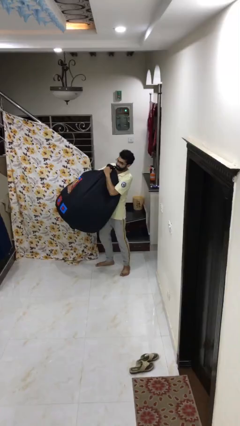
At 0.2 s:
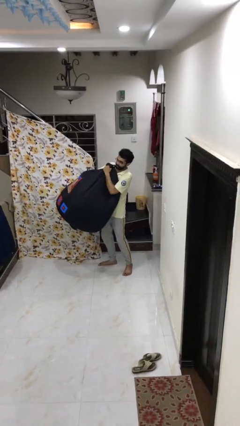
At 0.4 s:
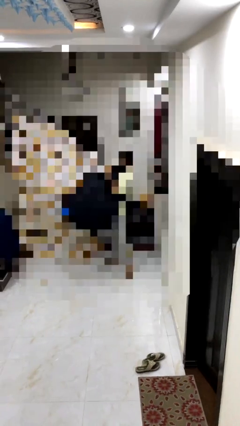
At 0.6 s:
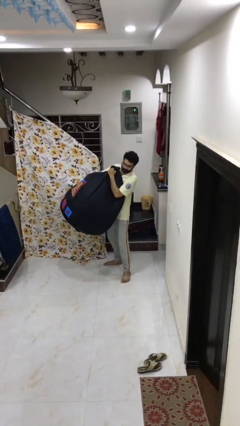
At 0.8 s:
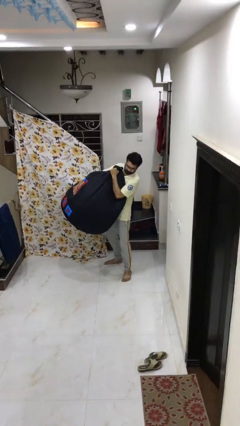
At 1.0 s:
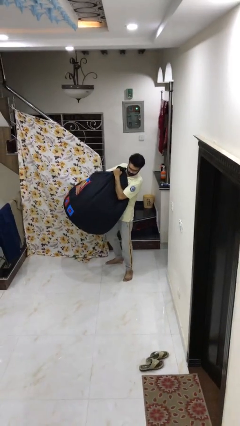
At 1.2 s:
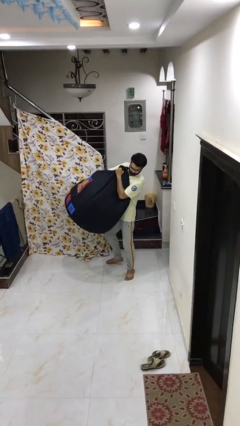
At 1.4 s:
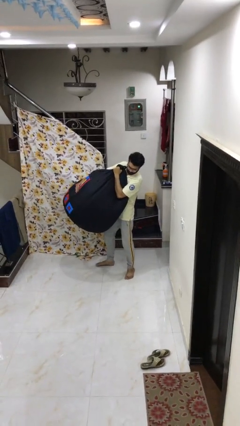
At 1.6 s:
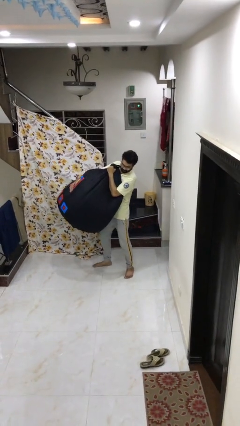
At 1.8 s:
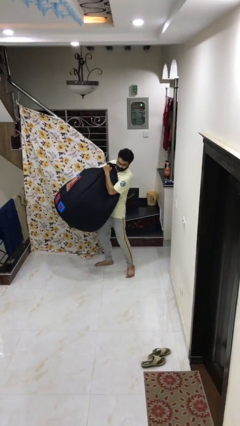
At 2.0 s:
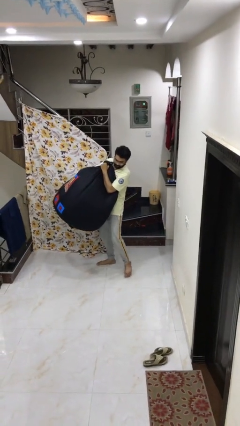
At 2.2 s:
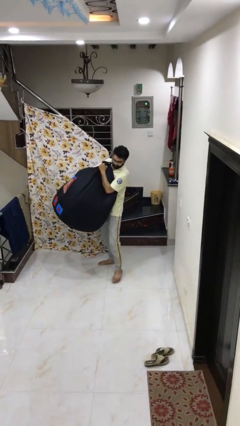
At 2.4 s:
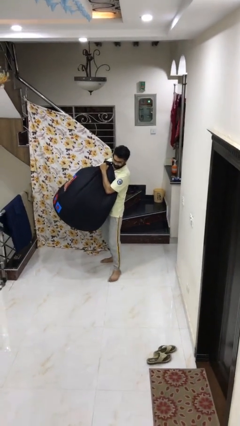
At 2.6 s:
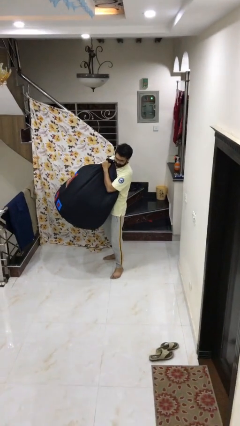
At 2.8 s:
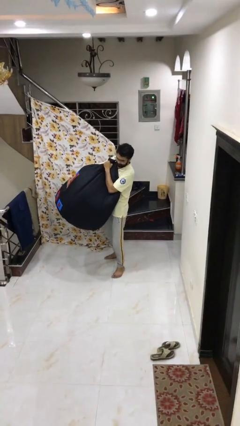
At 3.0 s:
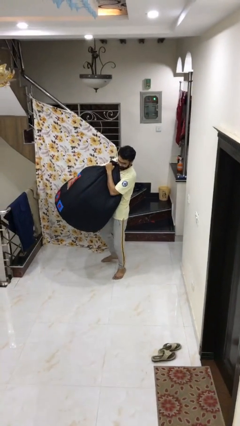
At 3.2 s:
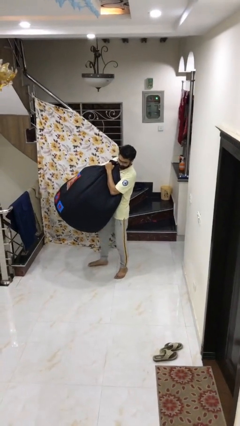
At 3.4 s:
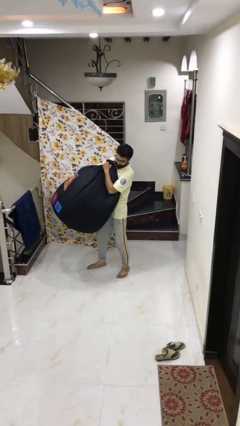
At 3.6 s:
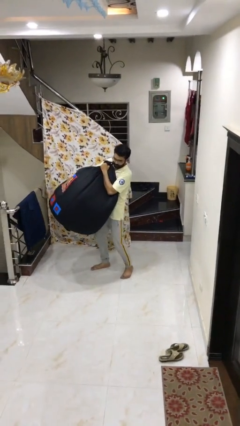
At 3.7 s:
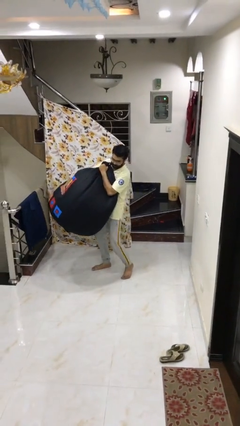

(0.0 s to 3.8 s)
person carries heavy object

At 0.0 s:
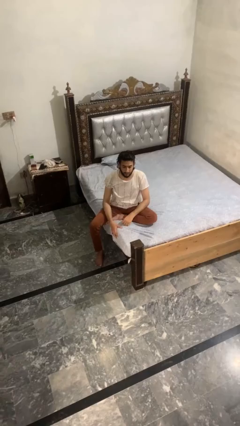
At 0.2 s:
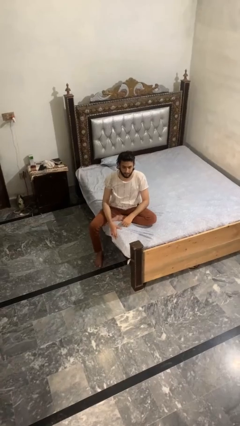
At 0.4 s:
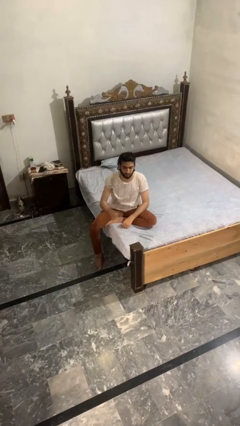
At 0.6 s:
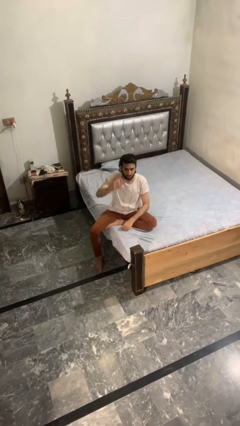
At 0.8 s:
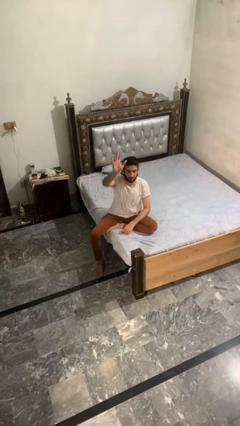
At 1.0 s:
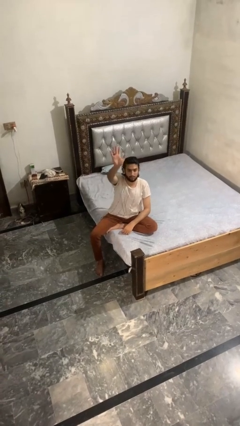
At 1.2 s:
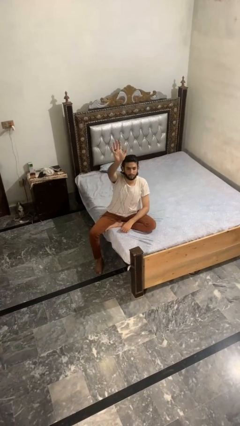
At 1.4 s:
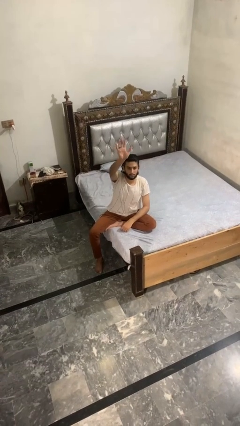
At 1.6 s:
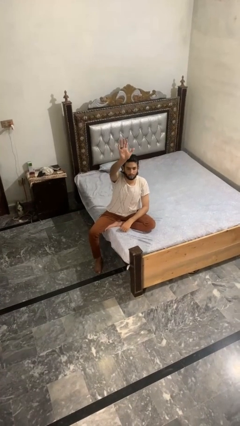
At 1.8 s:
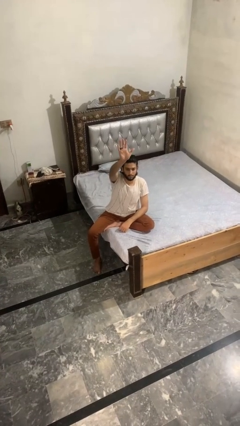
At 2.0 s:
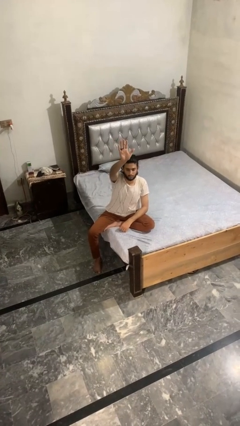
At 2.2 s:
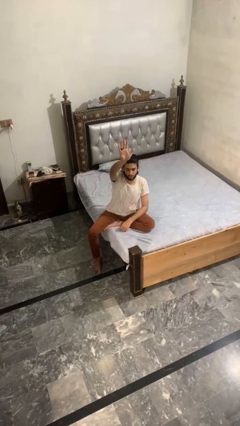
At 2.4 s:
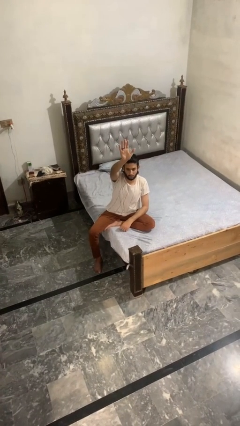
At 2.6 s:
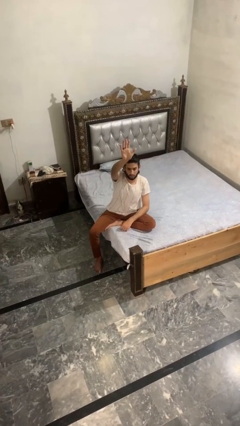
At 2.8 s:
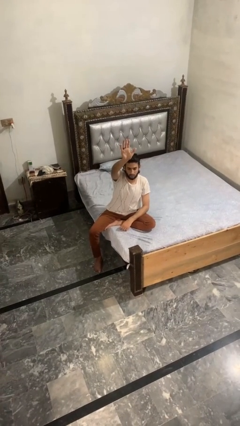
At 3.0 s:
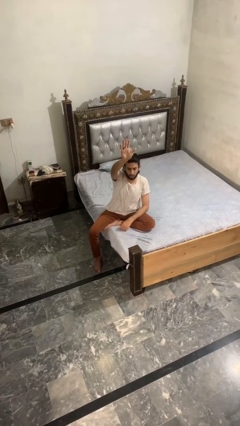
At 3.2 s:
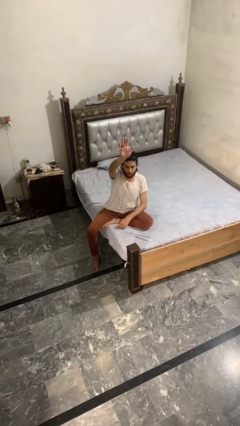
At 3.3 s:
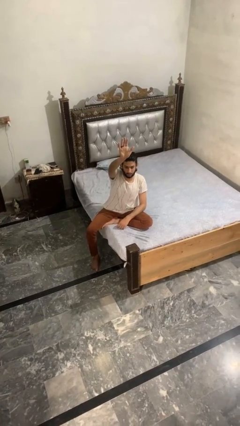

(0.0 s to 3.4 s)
person gestures raise hand

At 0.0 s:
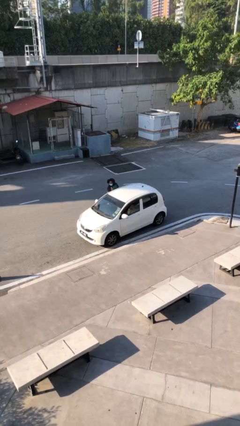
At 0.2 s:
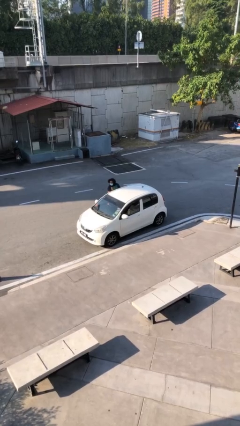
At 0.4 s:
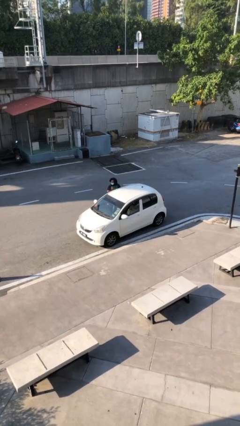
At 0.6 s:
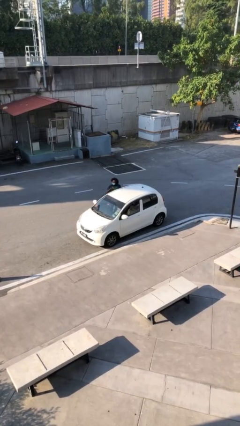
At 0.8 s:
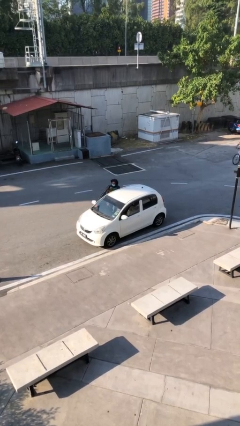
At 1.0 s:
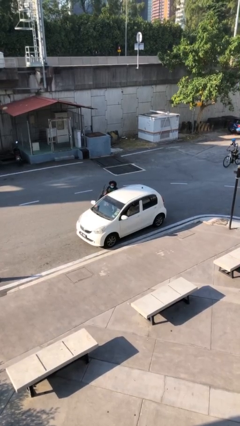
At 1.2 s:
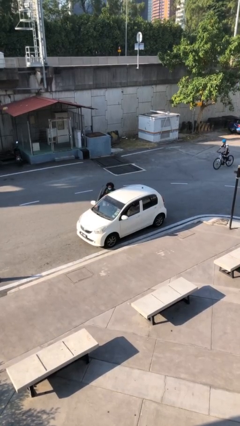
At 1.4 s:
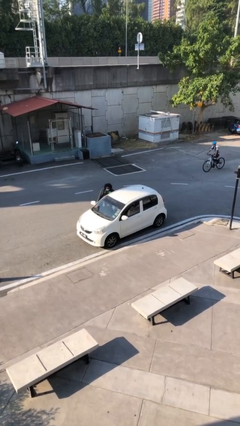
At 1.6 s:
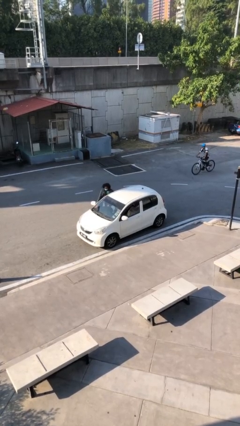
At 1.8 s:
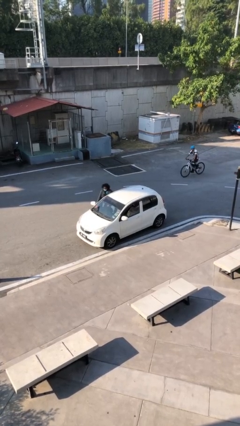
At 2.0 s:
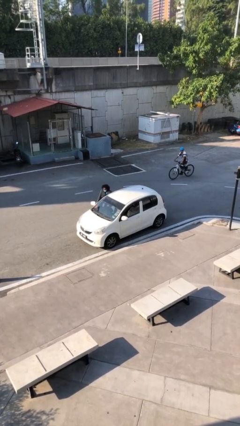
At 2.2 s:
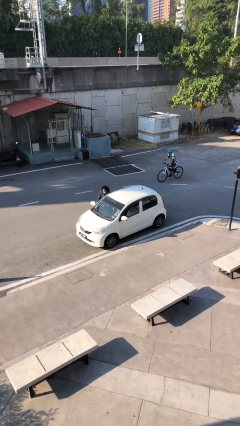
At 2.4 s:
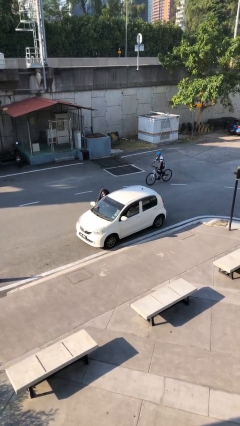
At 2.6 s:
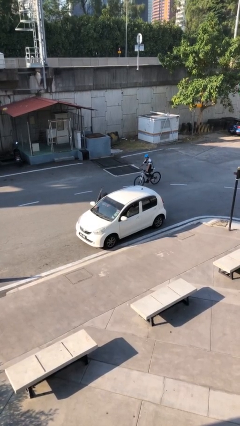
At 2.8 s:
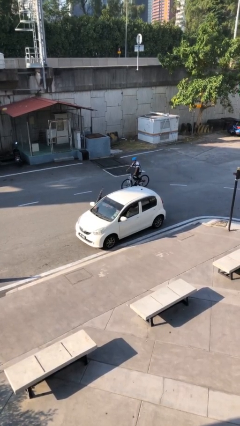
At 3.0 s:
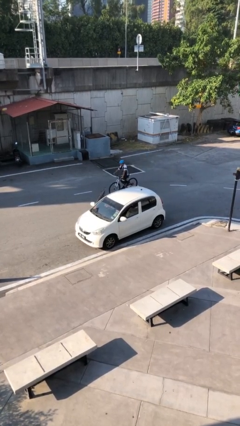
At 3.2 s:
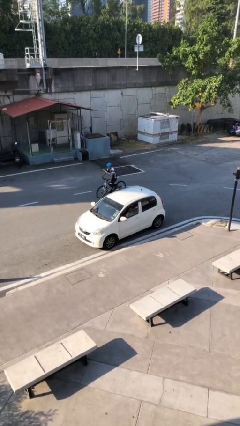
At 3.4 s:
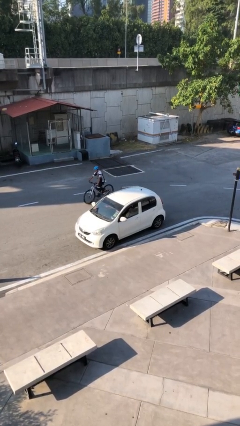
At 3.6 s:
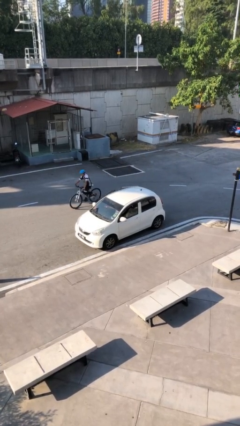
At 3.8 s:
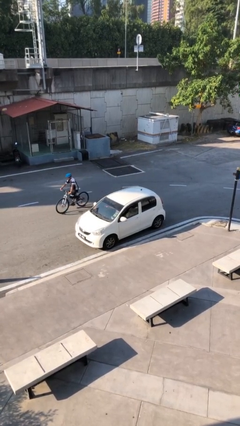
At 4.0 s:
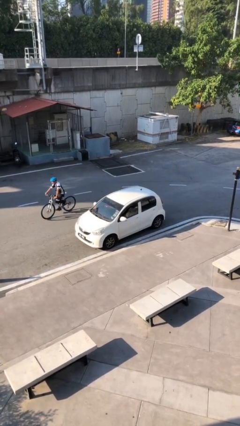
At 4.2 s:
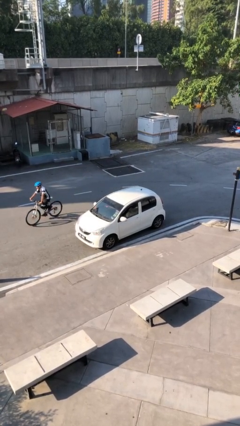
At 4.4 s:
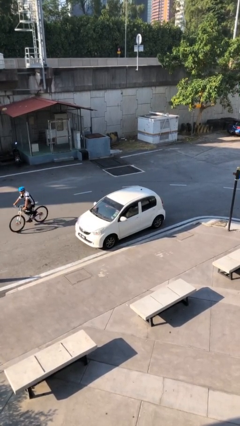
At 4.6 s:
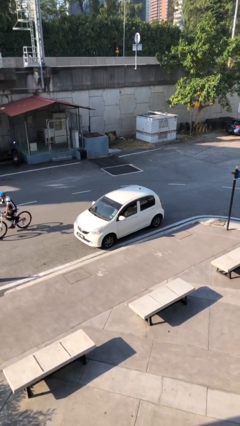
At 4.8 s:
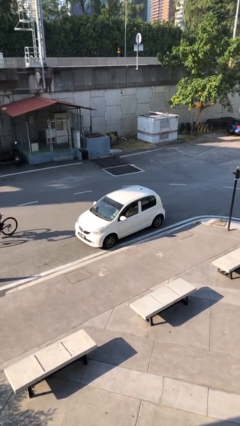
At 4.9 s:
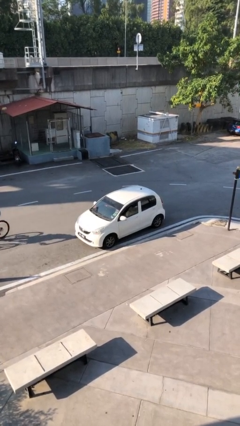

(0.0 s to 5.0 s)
car picks up person

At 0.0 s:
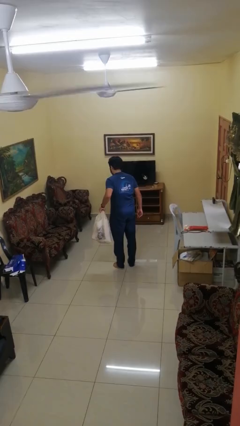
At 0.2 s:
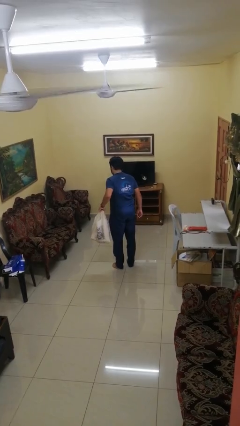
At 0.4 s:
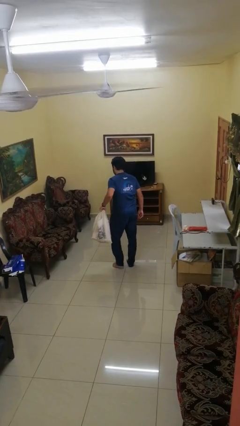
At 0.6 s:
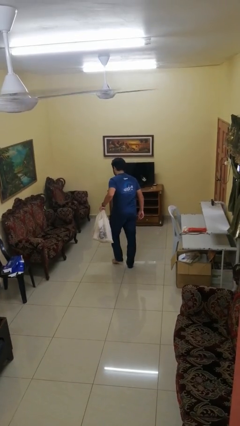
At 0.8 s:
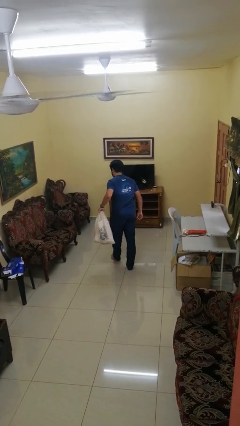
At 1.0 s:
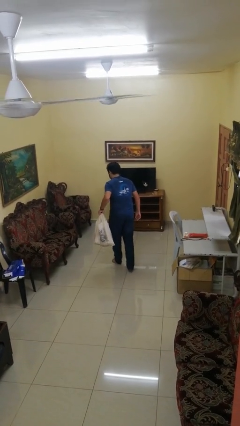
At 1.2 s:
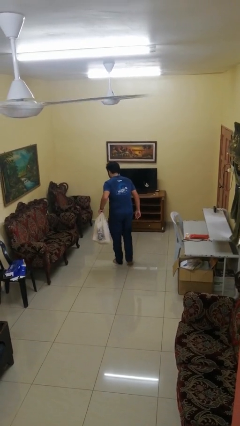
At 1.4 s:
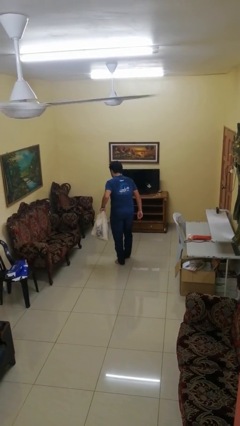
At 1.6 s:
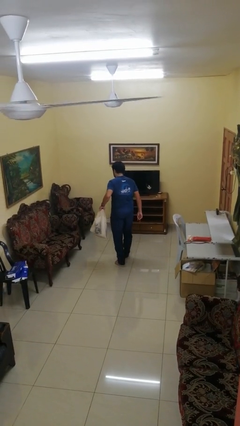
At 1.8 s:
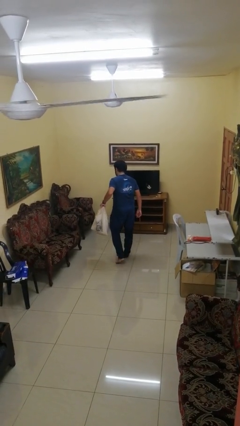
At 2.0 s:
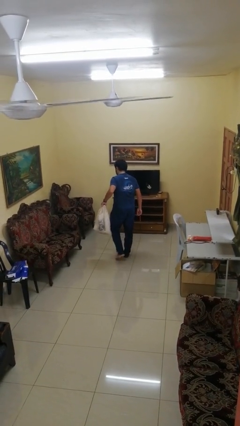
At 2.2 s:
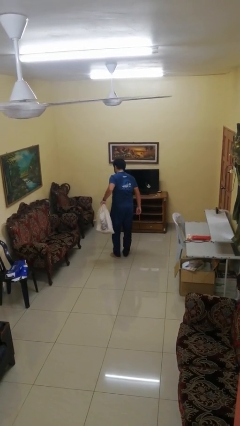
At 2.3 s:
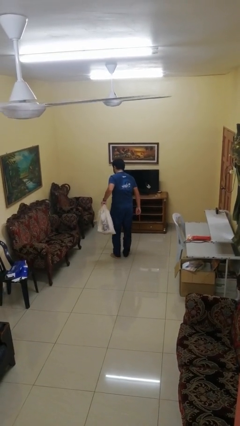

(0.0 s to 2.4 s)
person carries groceries

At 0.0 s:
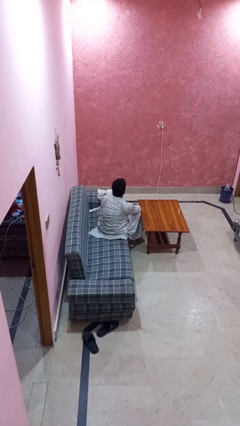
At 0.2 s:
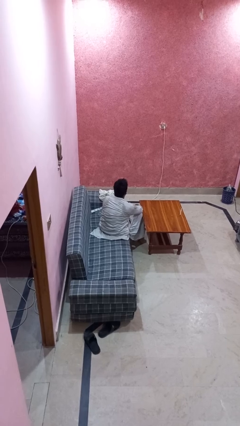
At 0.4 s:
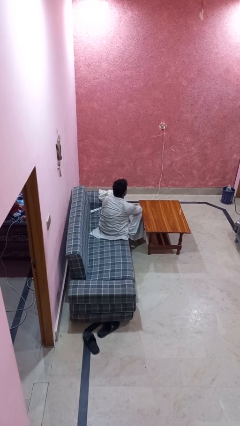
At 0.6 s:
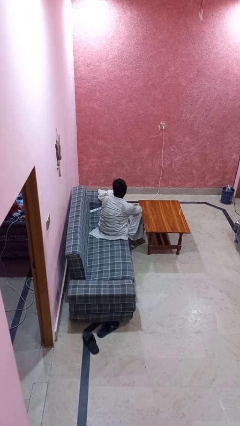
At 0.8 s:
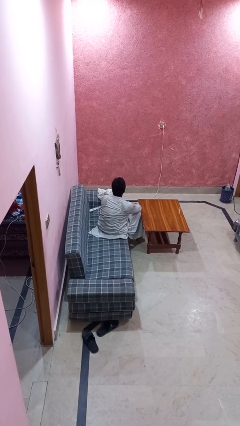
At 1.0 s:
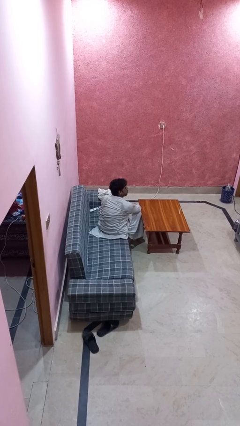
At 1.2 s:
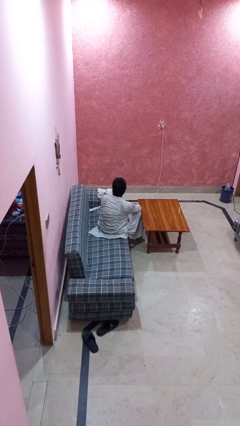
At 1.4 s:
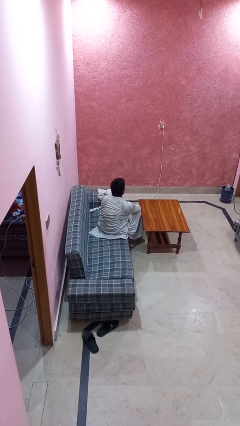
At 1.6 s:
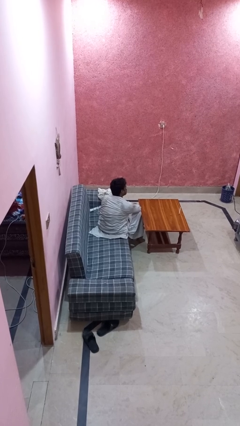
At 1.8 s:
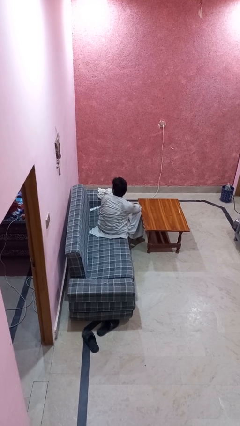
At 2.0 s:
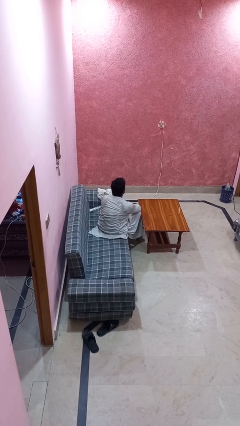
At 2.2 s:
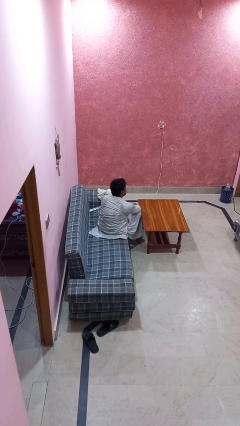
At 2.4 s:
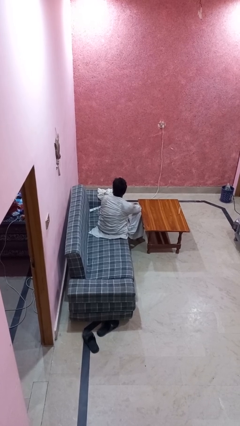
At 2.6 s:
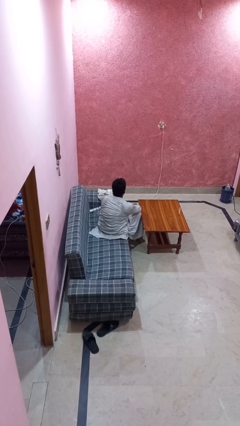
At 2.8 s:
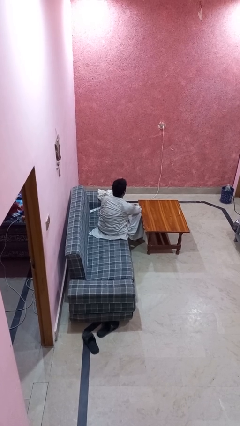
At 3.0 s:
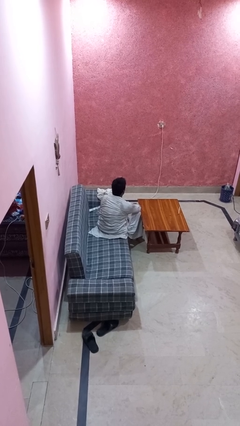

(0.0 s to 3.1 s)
person shakes head
